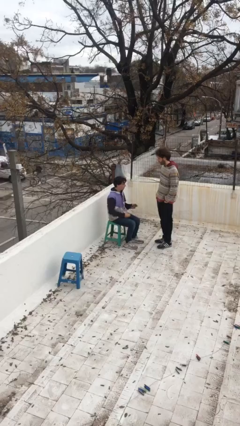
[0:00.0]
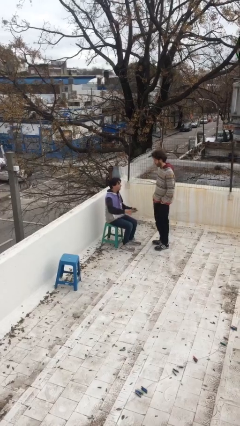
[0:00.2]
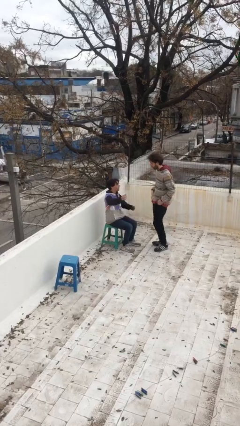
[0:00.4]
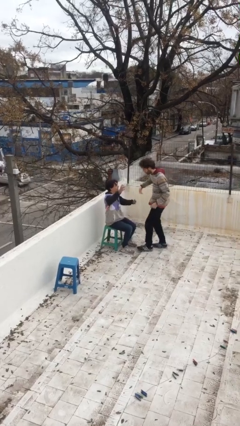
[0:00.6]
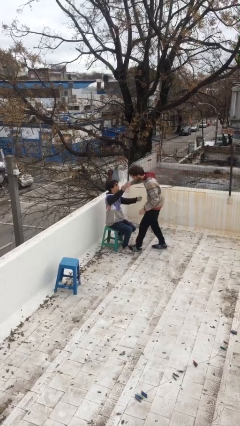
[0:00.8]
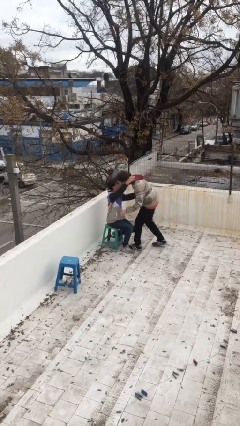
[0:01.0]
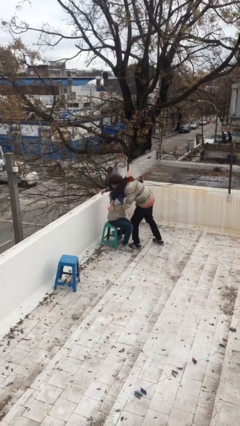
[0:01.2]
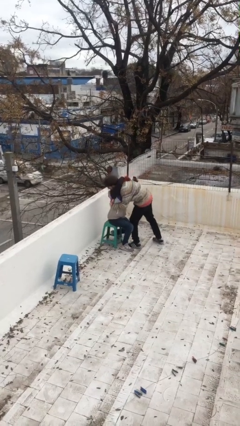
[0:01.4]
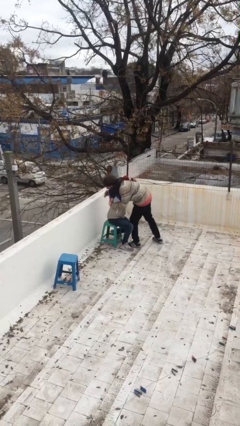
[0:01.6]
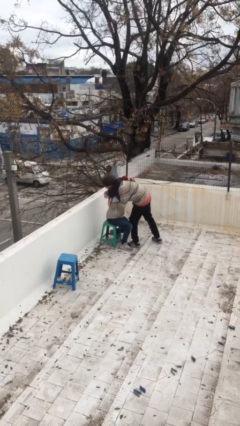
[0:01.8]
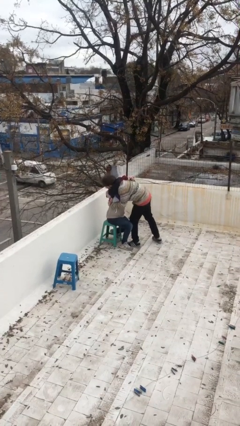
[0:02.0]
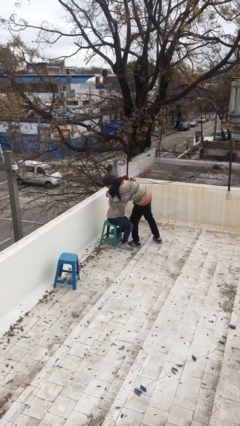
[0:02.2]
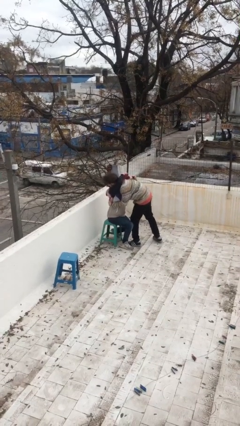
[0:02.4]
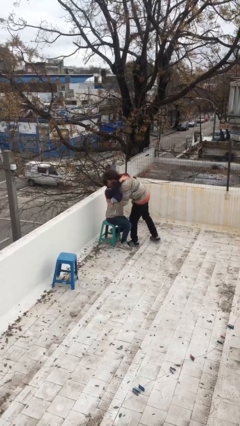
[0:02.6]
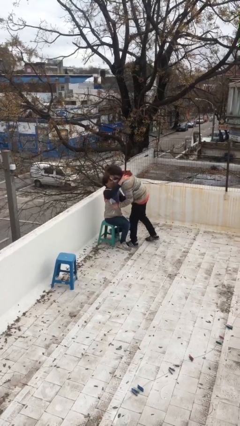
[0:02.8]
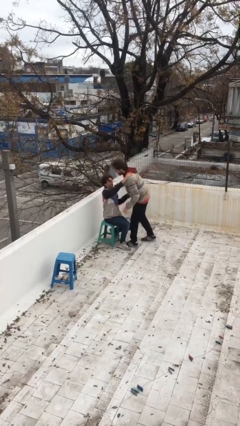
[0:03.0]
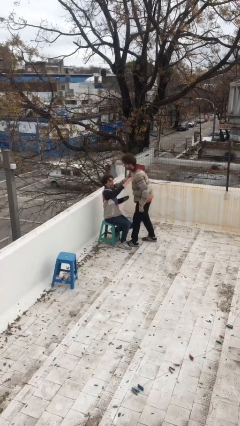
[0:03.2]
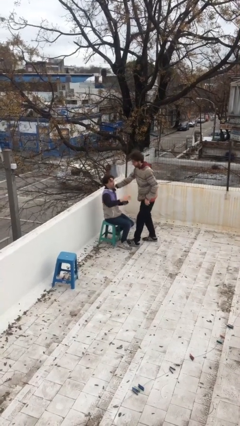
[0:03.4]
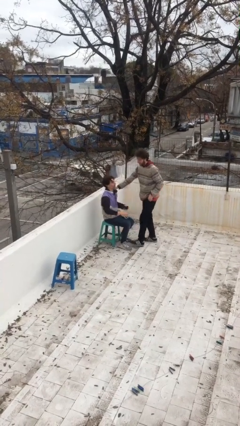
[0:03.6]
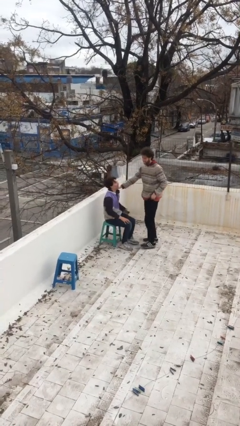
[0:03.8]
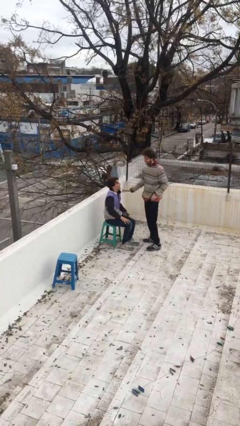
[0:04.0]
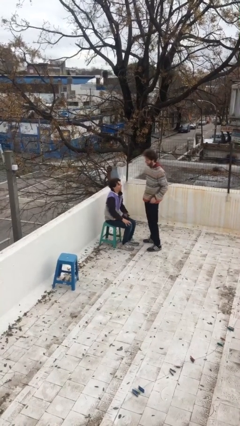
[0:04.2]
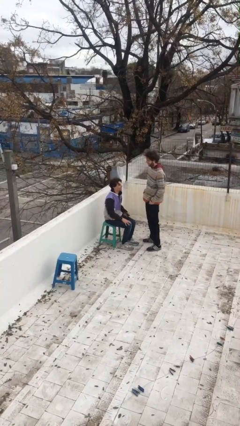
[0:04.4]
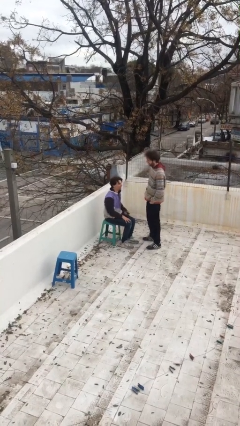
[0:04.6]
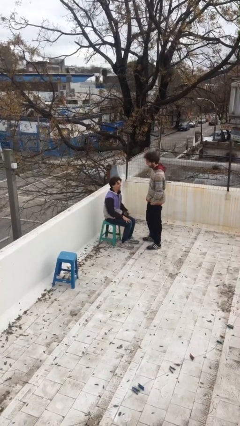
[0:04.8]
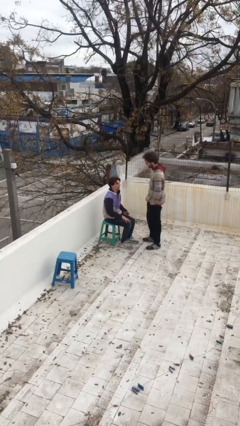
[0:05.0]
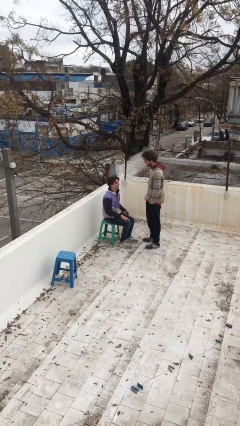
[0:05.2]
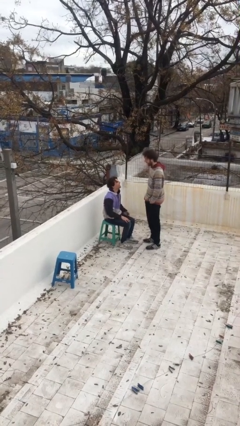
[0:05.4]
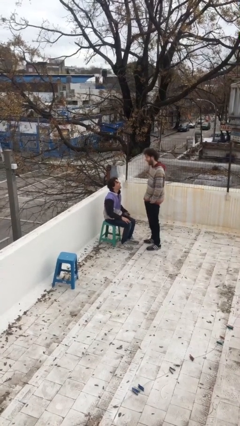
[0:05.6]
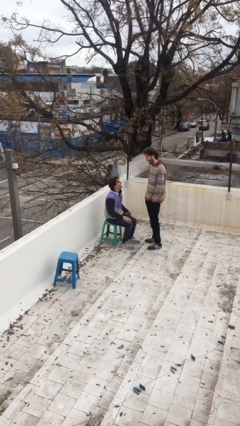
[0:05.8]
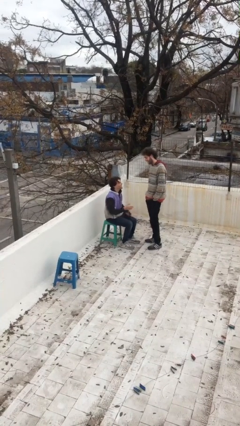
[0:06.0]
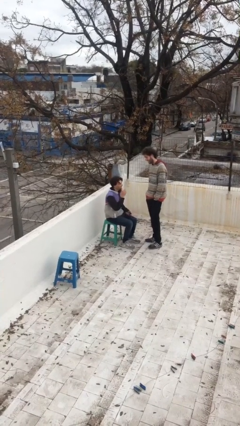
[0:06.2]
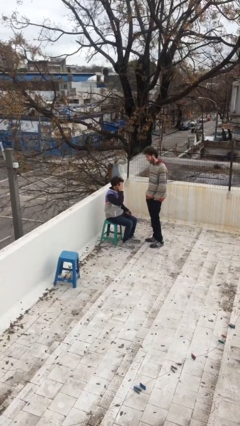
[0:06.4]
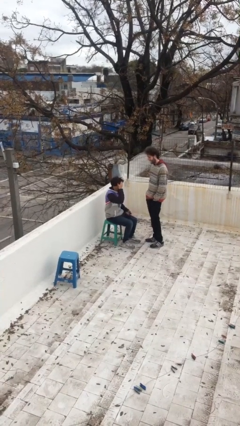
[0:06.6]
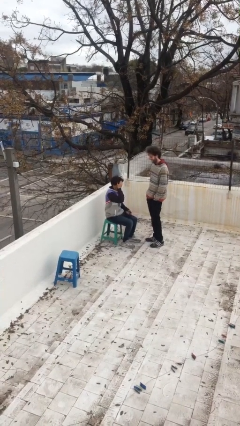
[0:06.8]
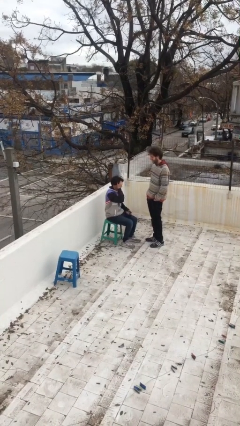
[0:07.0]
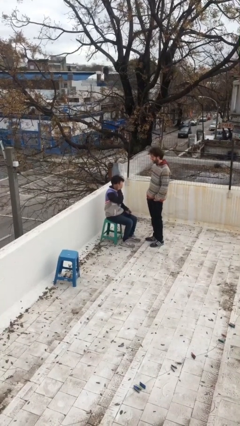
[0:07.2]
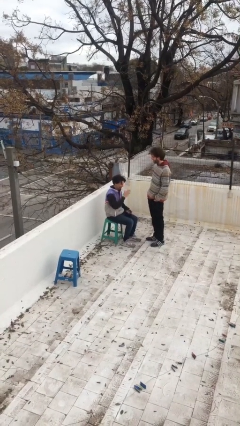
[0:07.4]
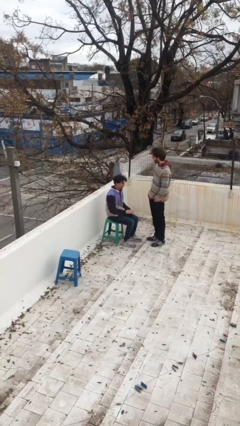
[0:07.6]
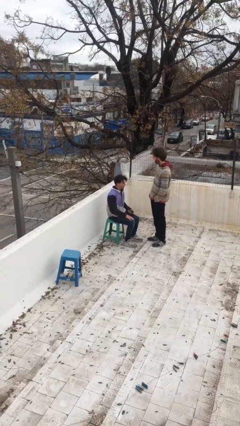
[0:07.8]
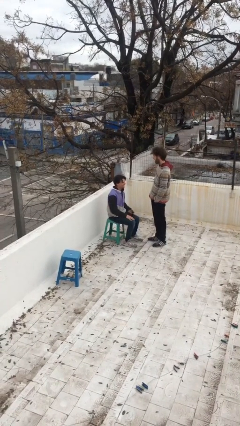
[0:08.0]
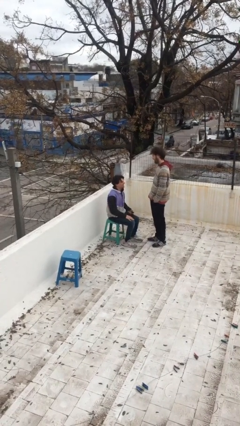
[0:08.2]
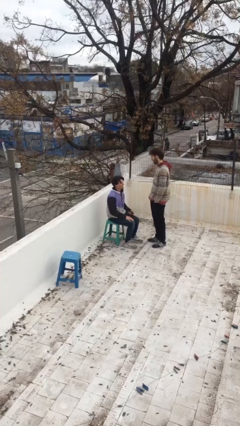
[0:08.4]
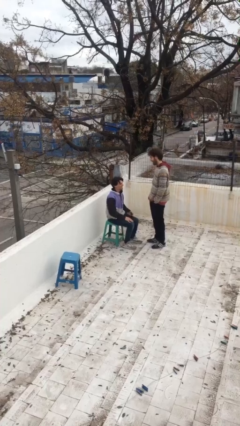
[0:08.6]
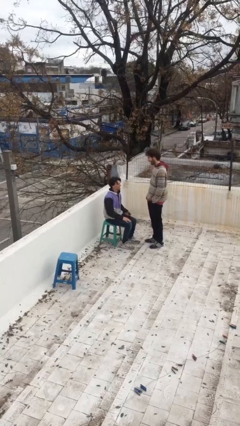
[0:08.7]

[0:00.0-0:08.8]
person embraces person

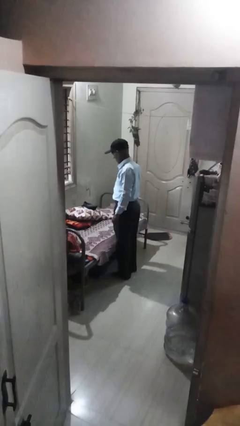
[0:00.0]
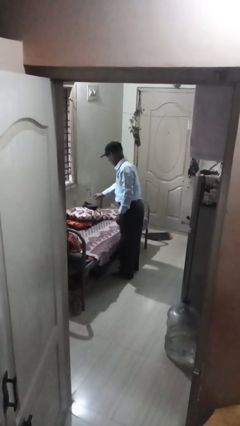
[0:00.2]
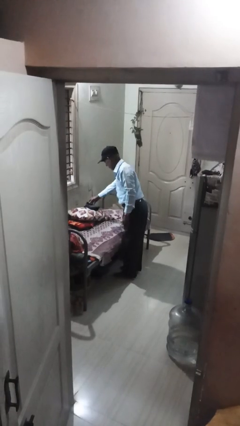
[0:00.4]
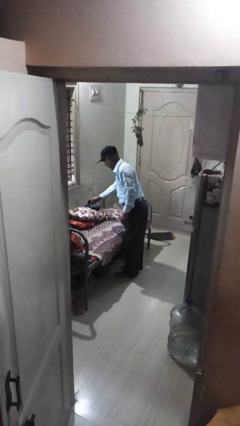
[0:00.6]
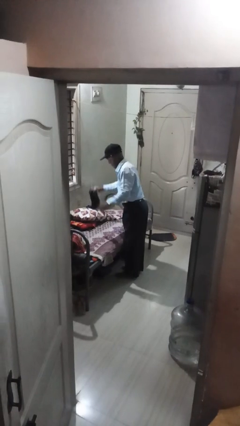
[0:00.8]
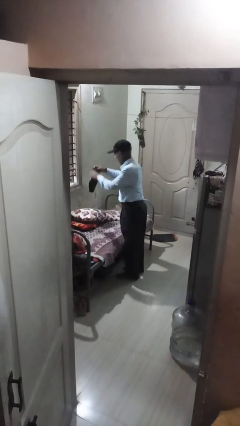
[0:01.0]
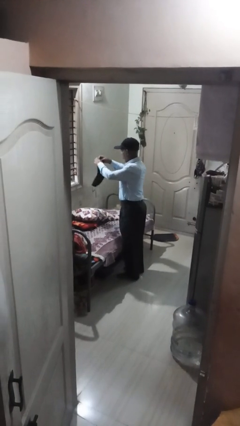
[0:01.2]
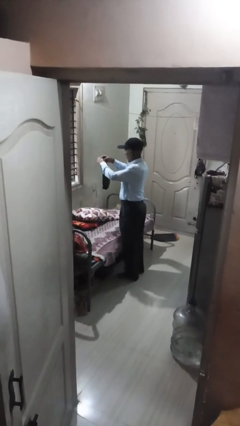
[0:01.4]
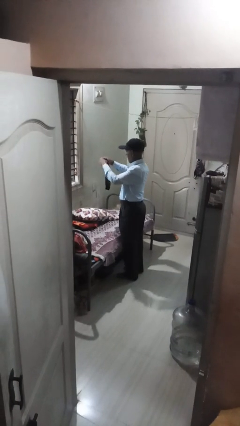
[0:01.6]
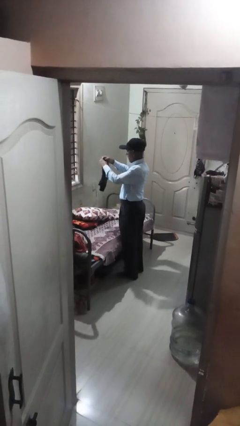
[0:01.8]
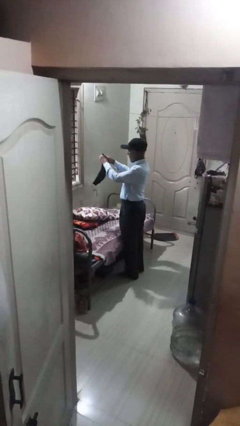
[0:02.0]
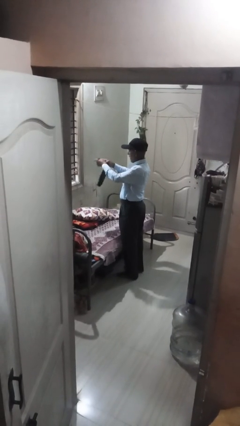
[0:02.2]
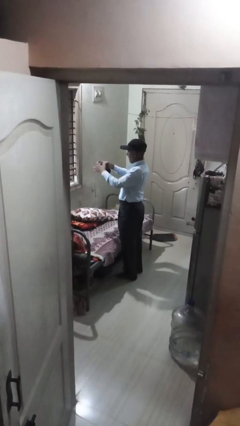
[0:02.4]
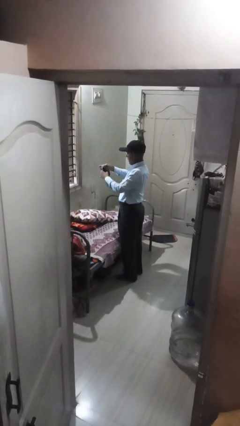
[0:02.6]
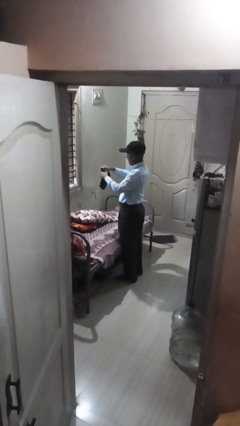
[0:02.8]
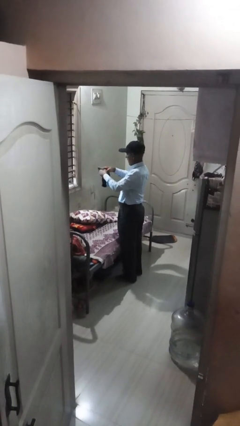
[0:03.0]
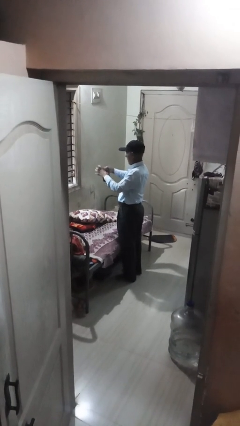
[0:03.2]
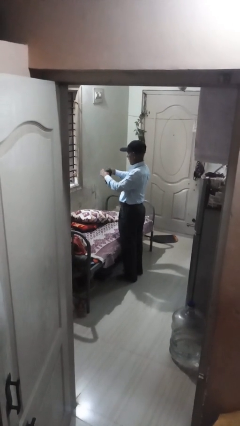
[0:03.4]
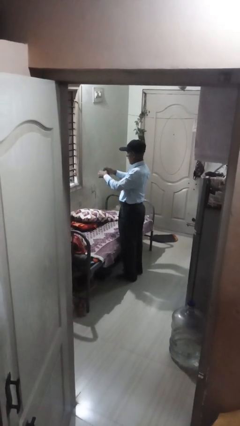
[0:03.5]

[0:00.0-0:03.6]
person folds socks

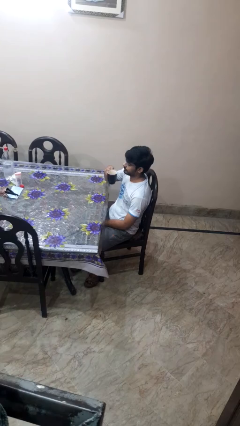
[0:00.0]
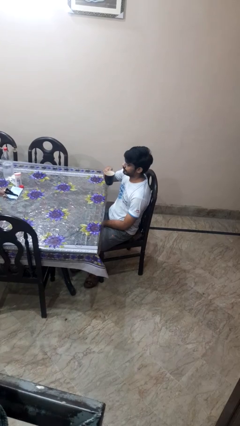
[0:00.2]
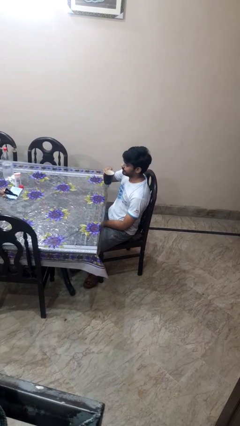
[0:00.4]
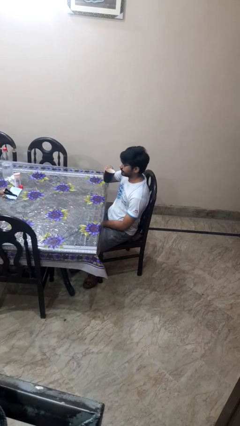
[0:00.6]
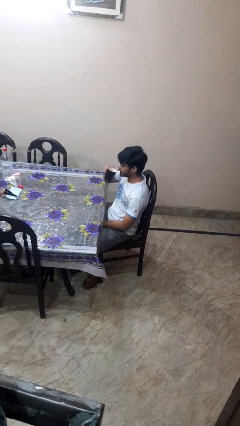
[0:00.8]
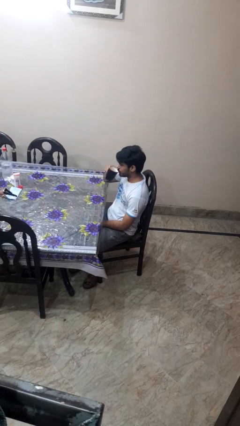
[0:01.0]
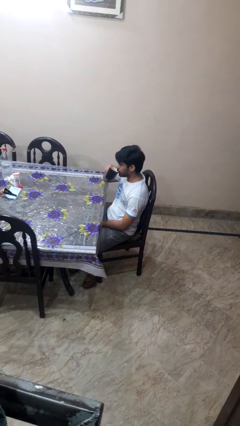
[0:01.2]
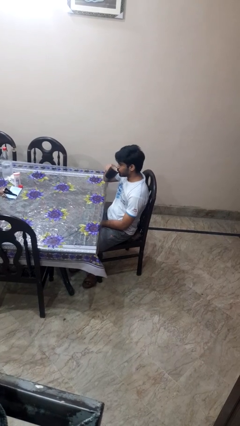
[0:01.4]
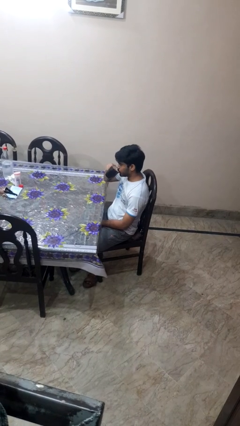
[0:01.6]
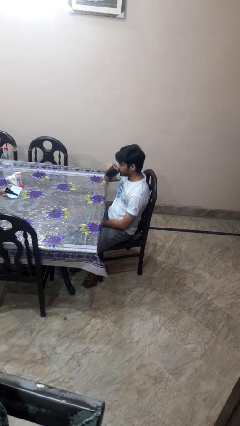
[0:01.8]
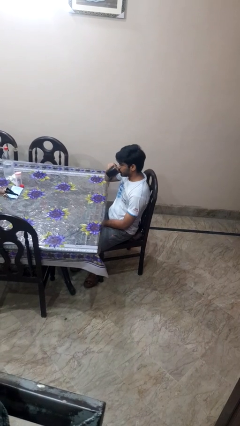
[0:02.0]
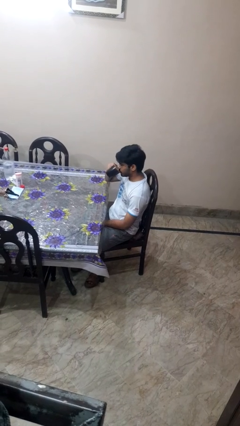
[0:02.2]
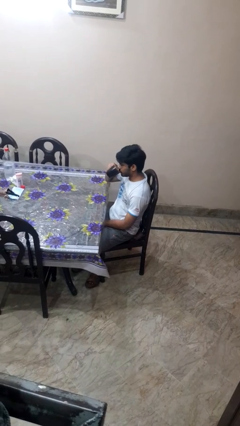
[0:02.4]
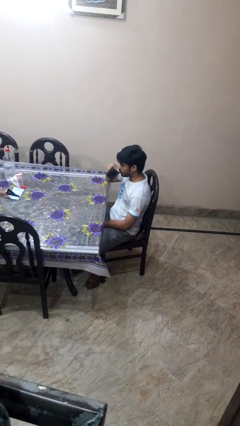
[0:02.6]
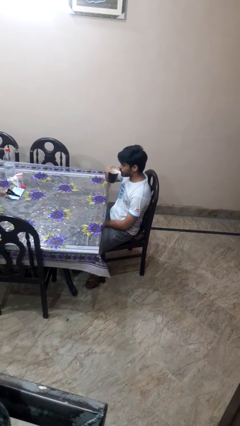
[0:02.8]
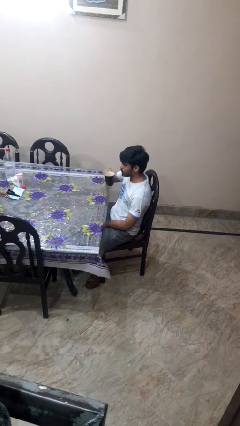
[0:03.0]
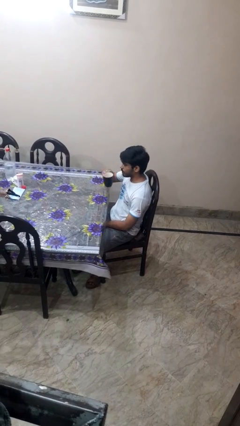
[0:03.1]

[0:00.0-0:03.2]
person drinks from mug

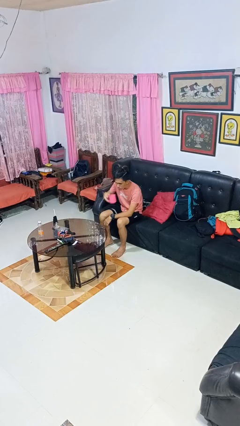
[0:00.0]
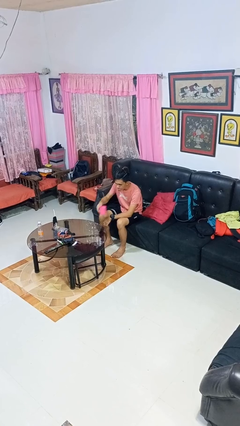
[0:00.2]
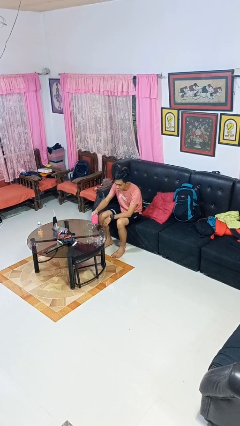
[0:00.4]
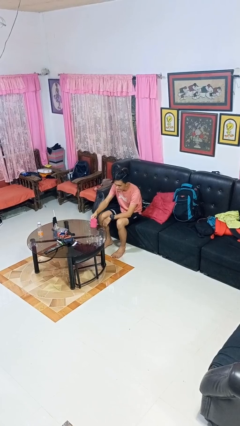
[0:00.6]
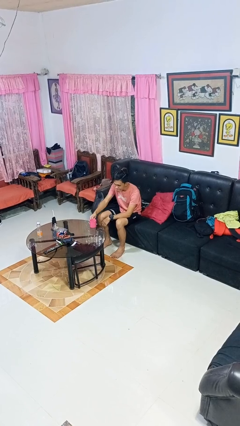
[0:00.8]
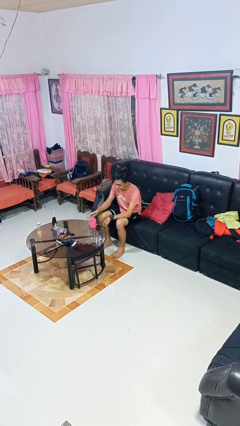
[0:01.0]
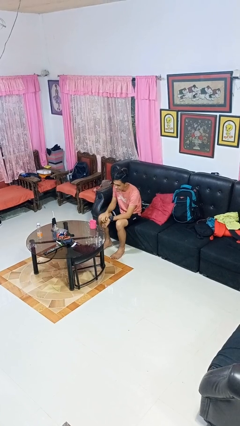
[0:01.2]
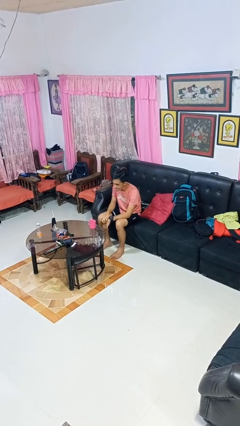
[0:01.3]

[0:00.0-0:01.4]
person puts down object on table

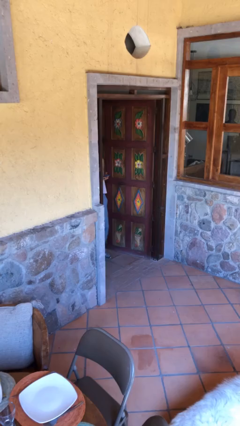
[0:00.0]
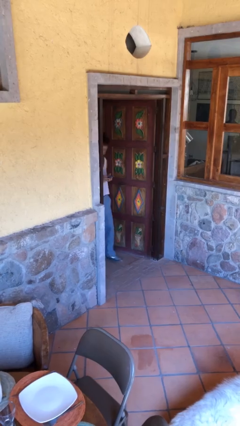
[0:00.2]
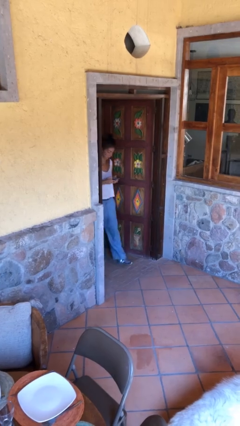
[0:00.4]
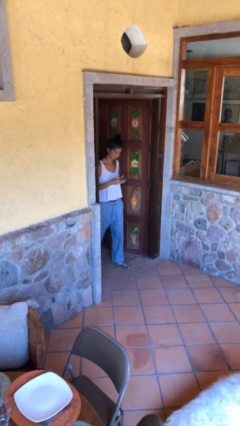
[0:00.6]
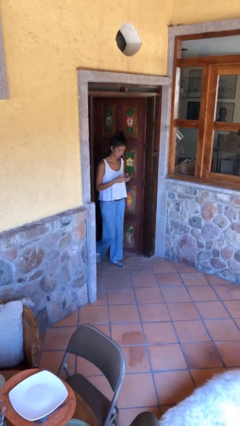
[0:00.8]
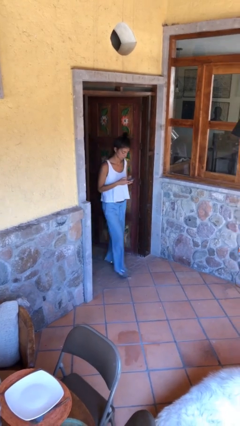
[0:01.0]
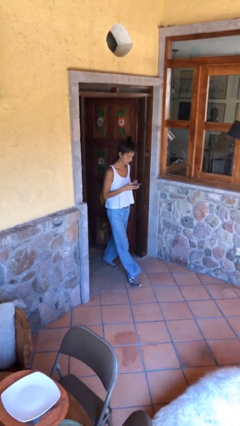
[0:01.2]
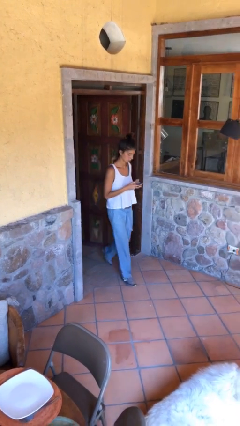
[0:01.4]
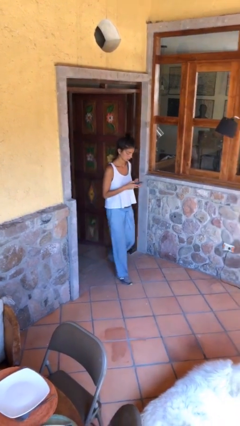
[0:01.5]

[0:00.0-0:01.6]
person enters scene through structure
